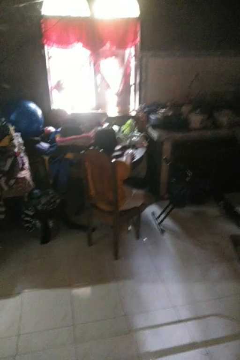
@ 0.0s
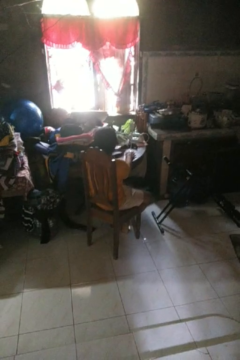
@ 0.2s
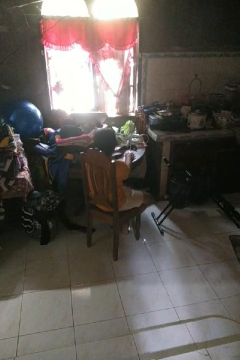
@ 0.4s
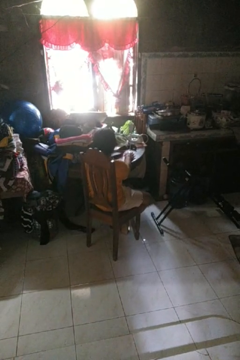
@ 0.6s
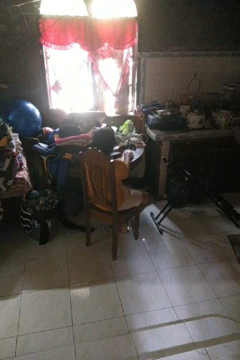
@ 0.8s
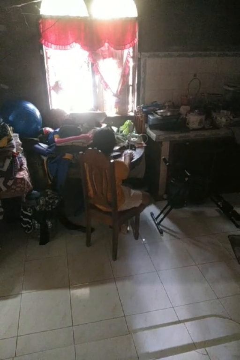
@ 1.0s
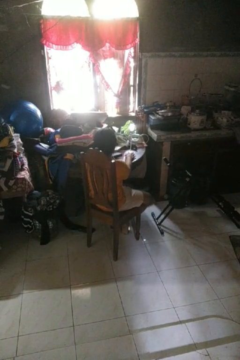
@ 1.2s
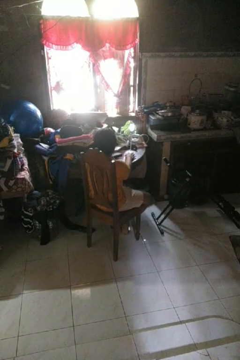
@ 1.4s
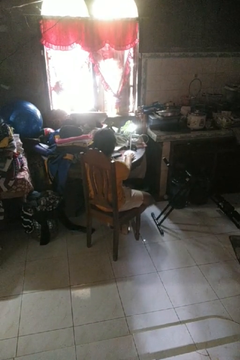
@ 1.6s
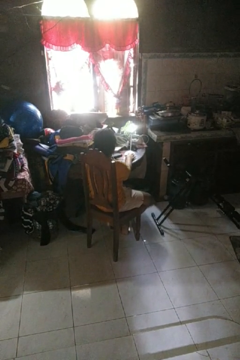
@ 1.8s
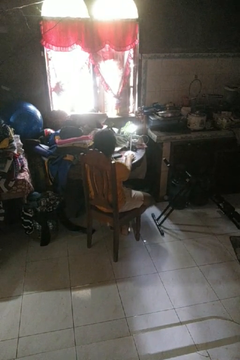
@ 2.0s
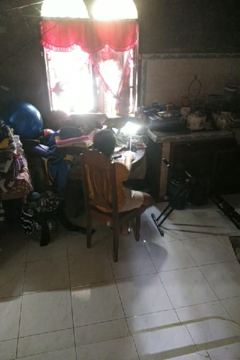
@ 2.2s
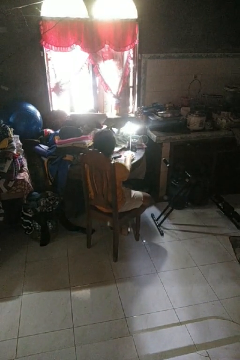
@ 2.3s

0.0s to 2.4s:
person turns on lamp

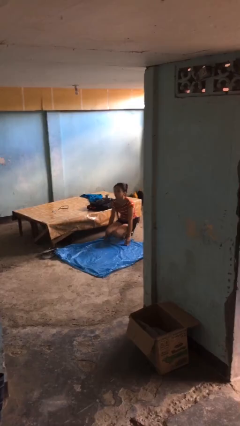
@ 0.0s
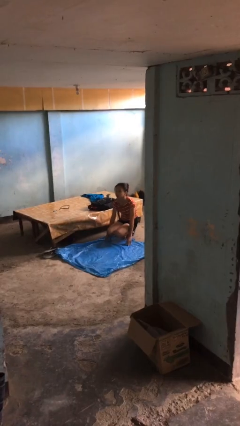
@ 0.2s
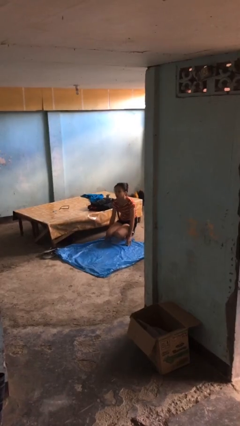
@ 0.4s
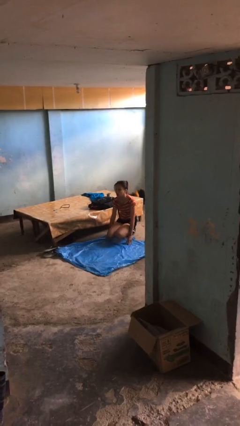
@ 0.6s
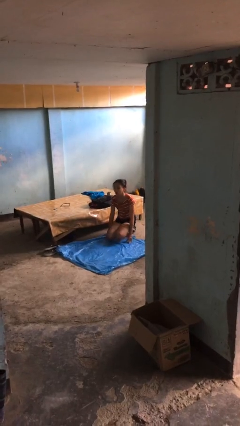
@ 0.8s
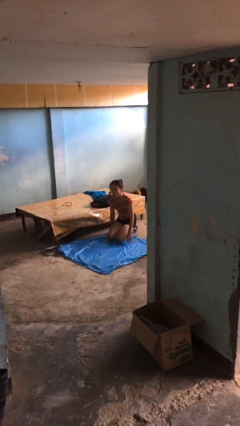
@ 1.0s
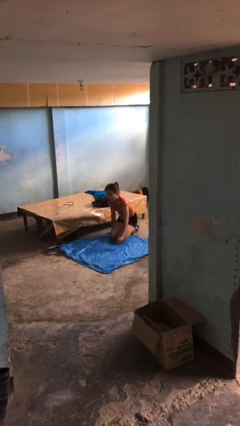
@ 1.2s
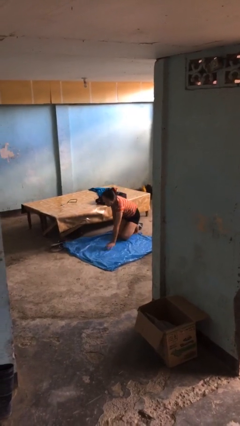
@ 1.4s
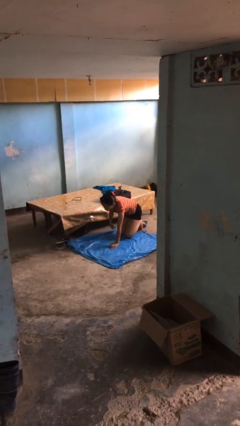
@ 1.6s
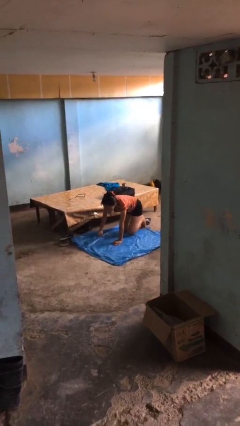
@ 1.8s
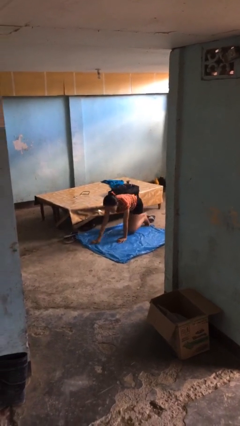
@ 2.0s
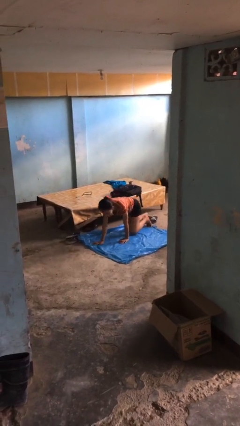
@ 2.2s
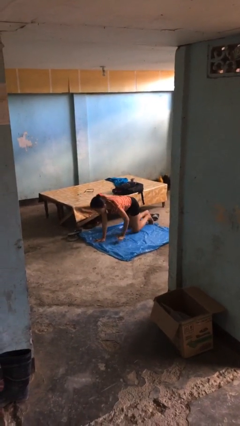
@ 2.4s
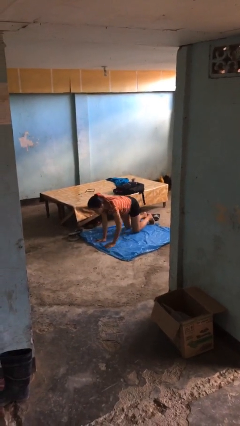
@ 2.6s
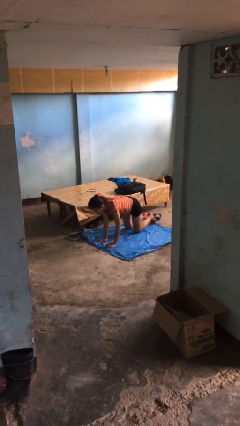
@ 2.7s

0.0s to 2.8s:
person crawls

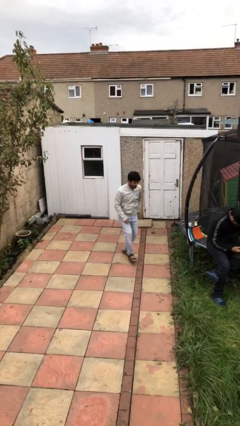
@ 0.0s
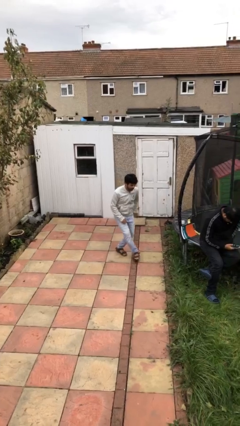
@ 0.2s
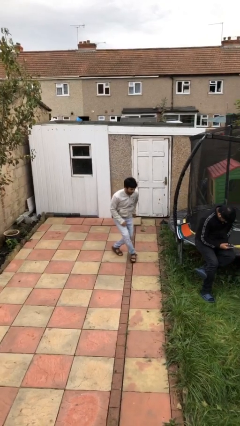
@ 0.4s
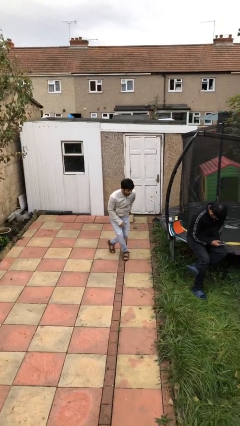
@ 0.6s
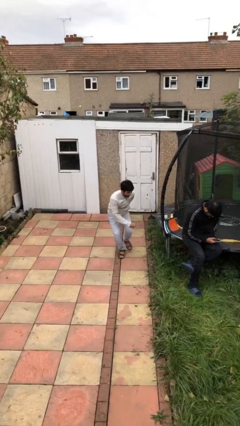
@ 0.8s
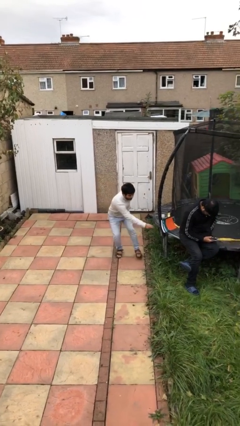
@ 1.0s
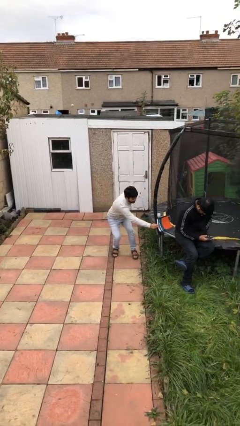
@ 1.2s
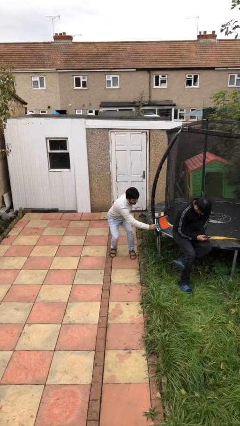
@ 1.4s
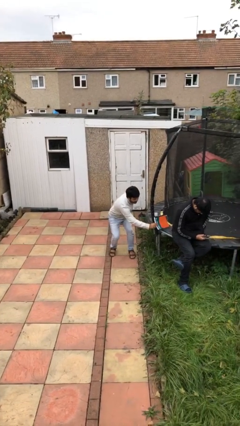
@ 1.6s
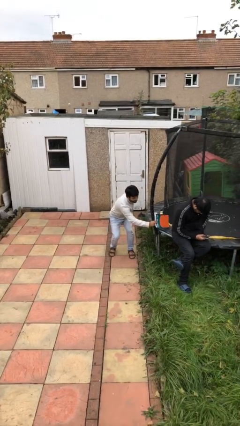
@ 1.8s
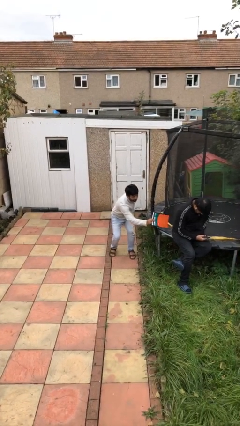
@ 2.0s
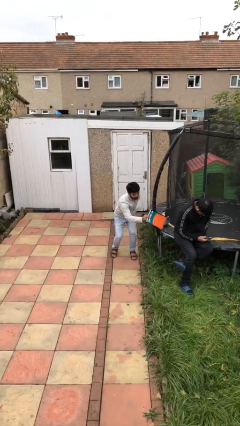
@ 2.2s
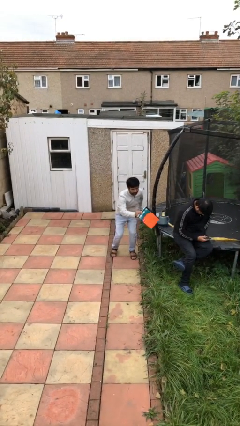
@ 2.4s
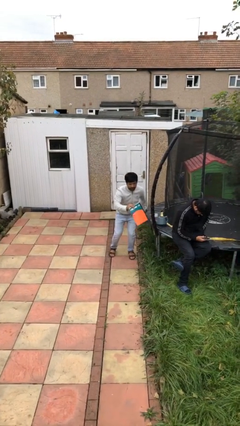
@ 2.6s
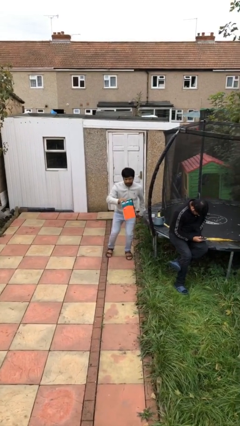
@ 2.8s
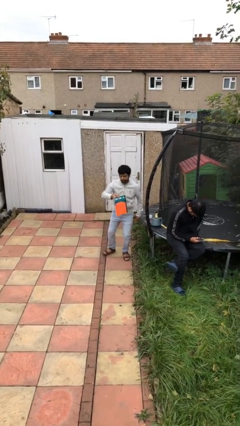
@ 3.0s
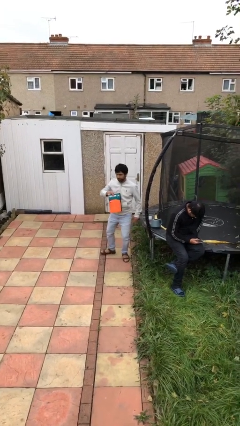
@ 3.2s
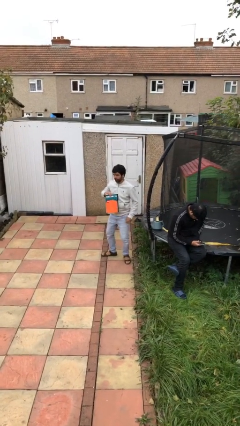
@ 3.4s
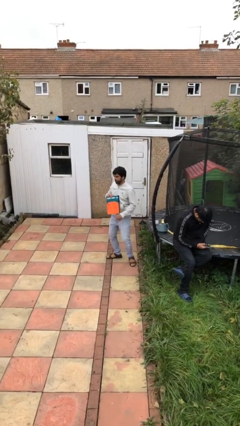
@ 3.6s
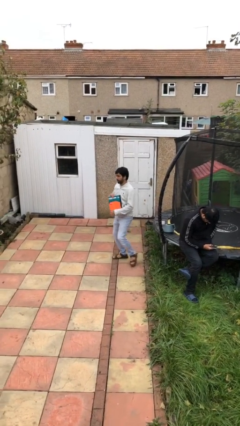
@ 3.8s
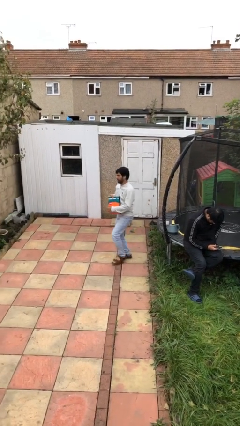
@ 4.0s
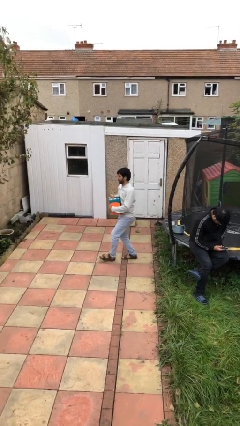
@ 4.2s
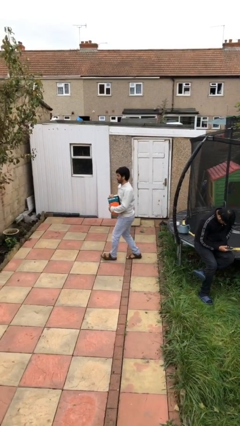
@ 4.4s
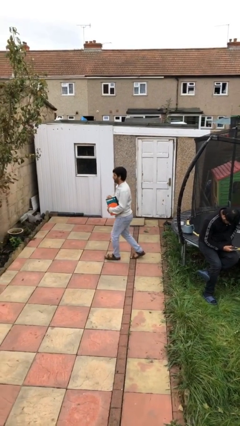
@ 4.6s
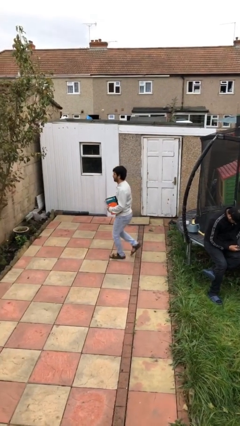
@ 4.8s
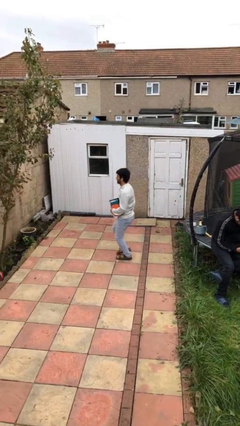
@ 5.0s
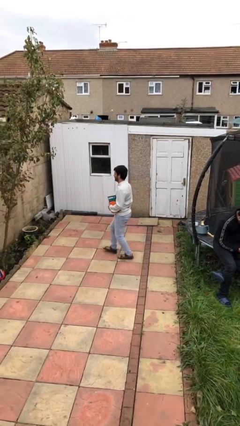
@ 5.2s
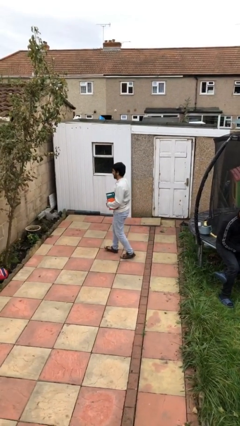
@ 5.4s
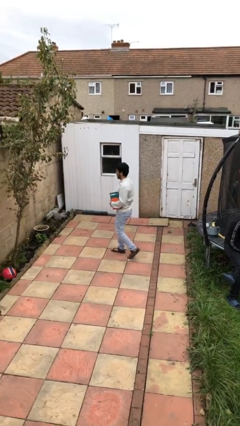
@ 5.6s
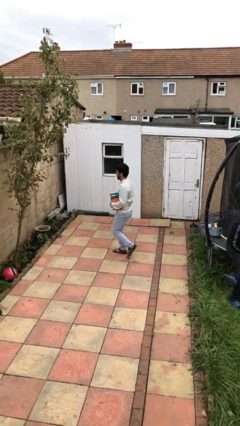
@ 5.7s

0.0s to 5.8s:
person steals object from person

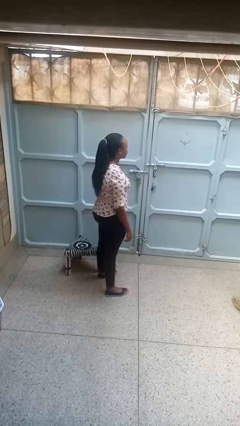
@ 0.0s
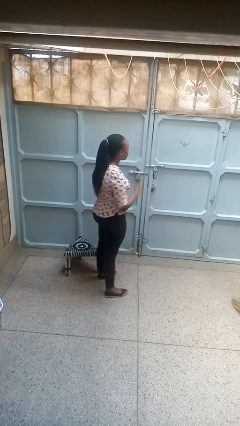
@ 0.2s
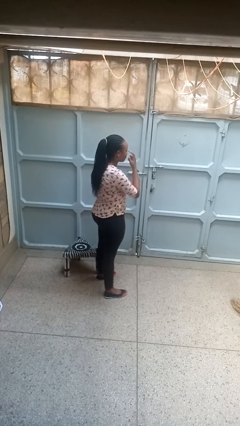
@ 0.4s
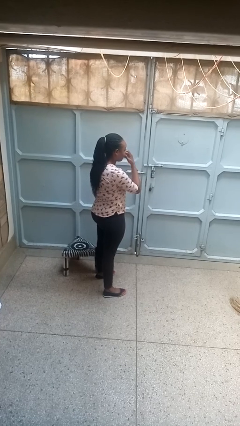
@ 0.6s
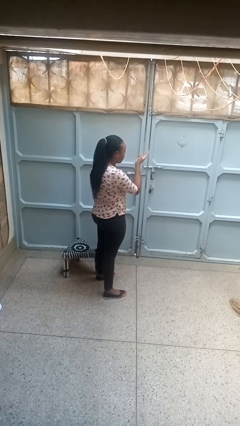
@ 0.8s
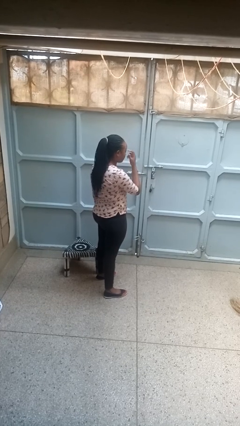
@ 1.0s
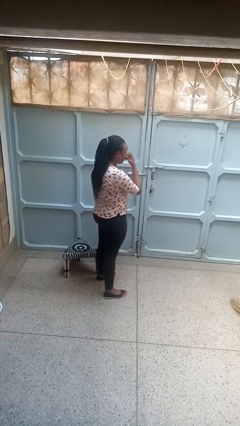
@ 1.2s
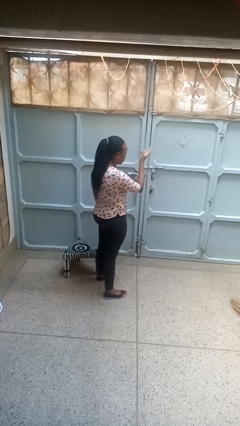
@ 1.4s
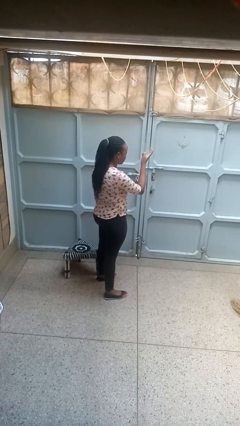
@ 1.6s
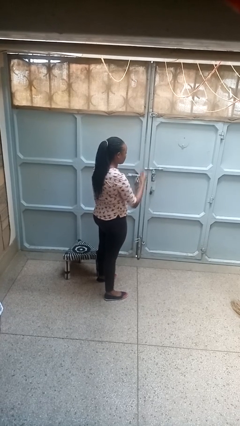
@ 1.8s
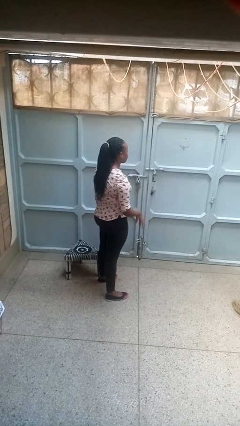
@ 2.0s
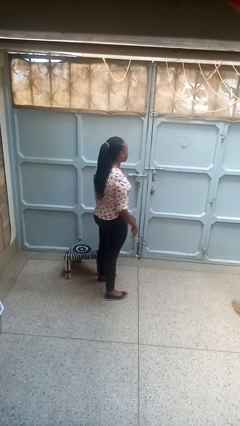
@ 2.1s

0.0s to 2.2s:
person gestures watch closely

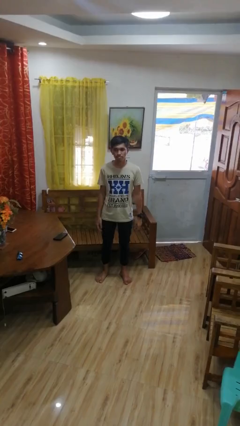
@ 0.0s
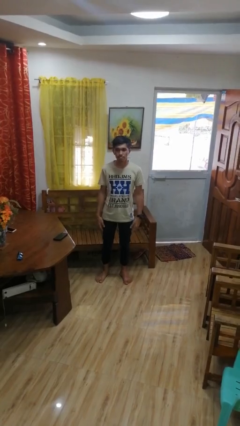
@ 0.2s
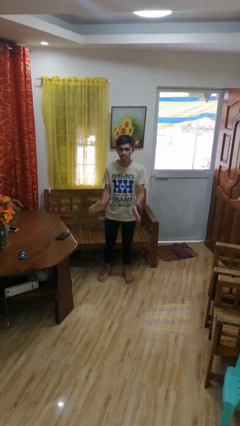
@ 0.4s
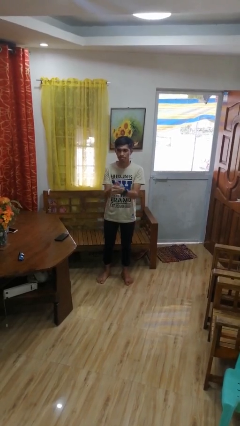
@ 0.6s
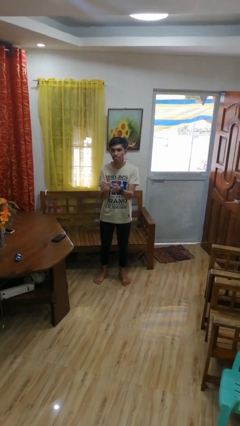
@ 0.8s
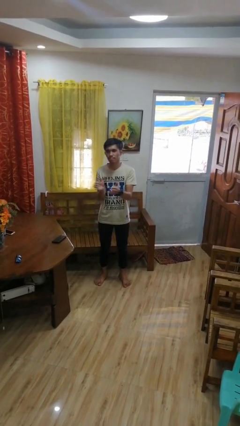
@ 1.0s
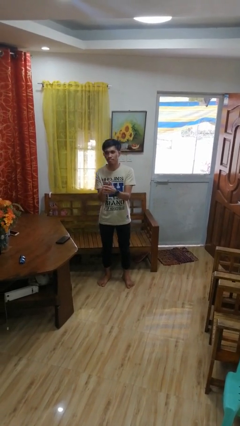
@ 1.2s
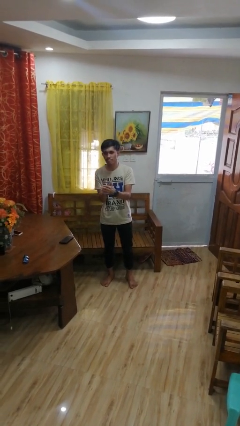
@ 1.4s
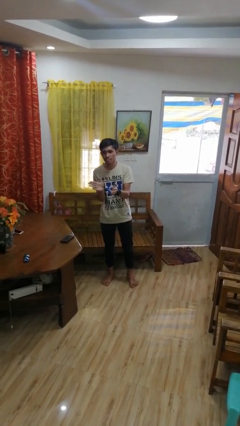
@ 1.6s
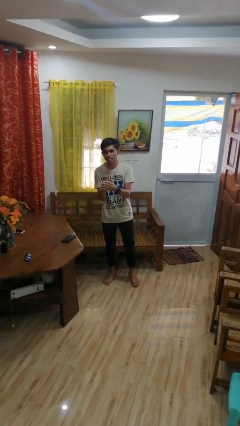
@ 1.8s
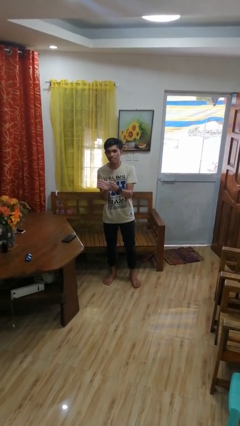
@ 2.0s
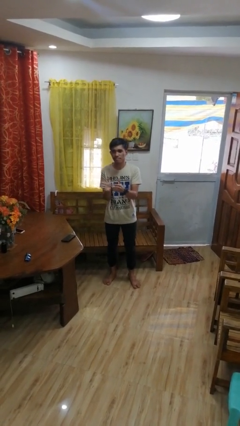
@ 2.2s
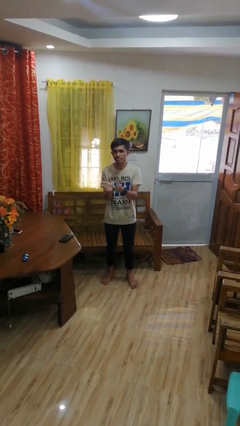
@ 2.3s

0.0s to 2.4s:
person claps hands

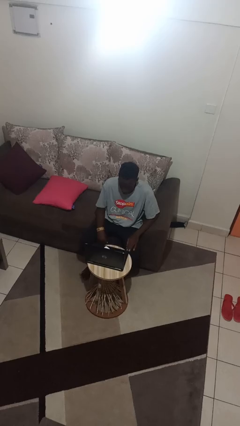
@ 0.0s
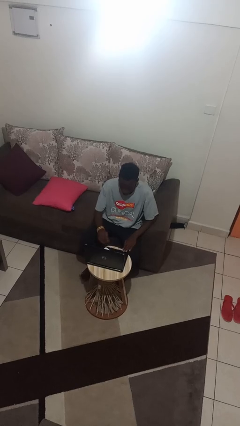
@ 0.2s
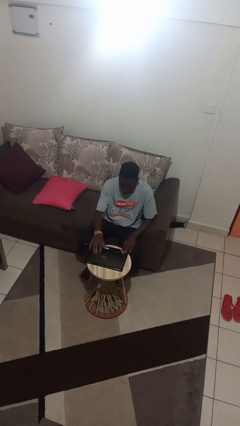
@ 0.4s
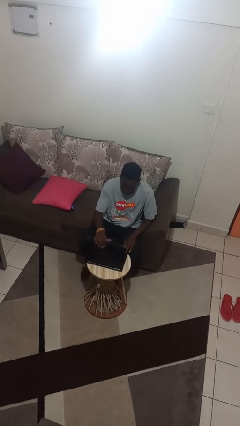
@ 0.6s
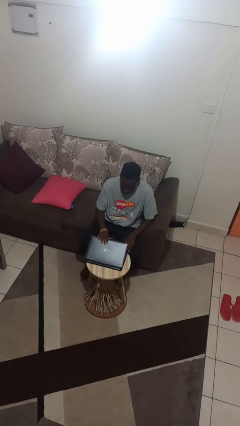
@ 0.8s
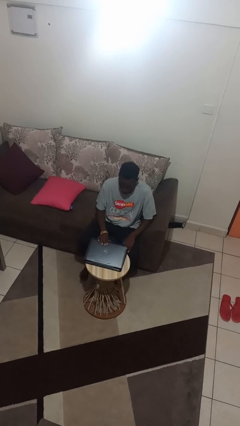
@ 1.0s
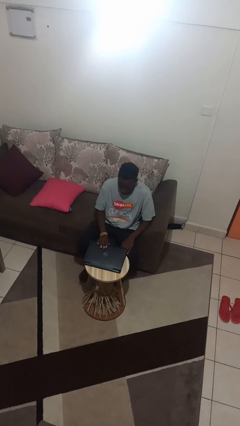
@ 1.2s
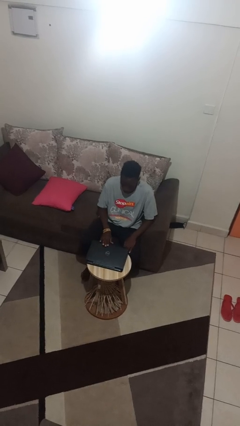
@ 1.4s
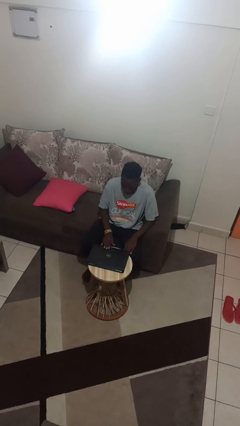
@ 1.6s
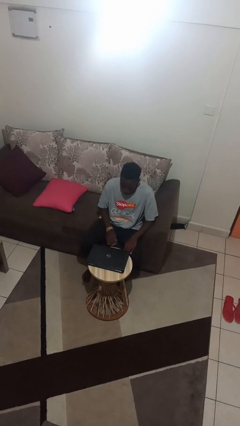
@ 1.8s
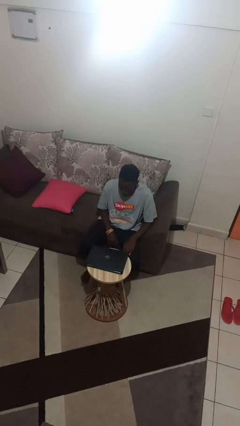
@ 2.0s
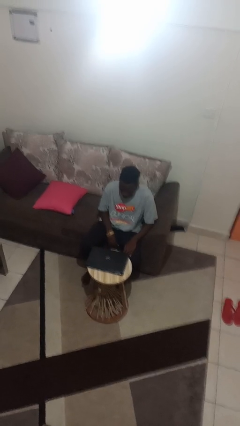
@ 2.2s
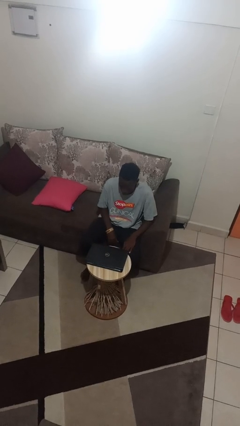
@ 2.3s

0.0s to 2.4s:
person closes laptop
